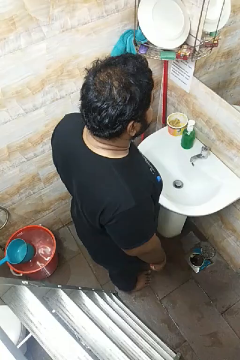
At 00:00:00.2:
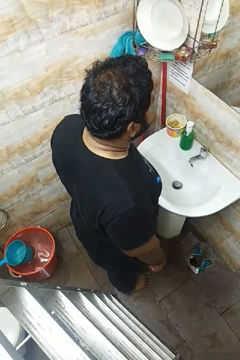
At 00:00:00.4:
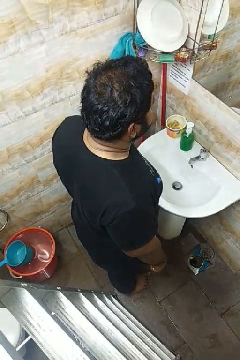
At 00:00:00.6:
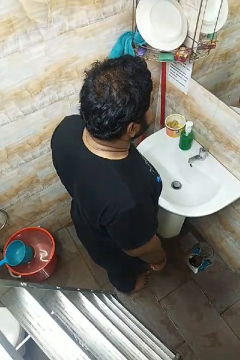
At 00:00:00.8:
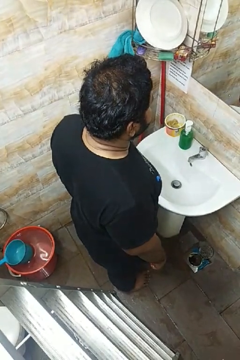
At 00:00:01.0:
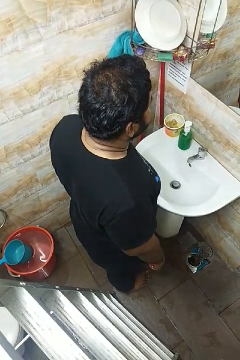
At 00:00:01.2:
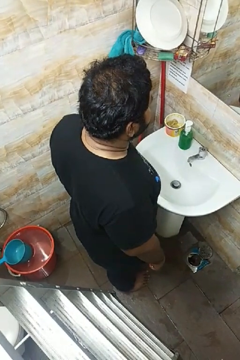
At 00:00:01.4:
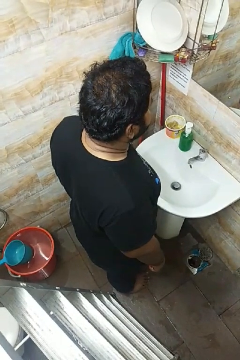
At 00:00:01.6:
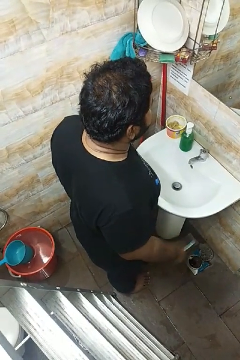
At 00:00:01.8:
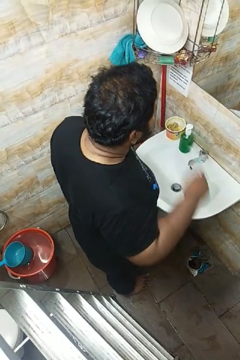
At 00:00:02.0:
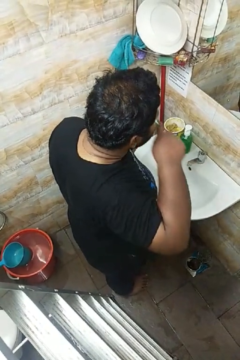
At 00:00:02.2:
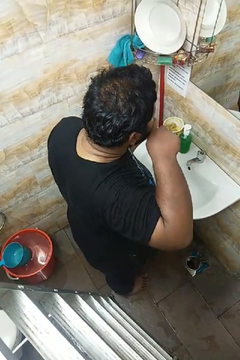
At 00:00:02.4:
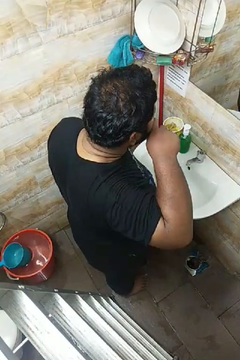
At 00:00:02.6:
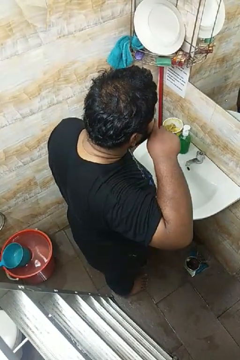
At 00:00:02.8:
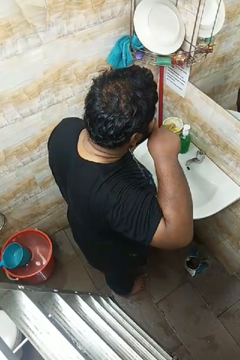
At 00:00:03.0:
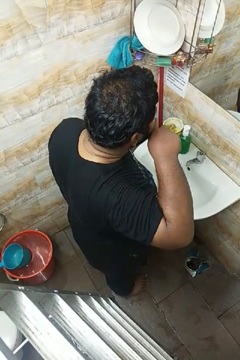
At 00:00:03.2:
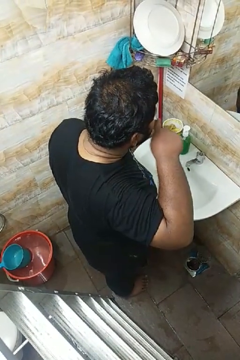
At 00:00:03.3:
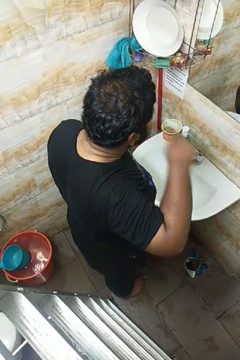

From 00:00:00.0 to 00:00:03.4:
person brushes teeth

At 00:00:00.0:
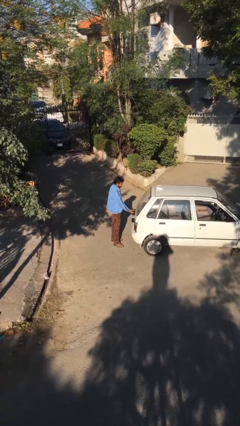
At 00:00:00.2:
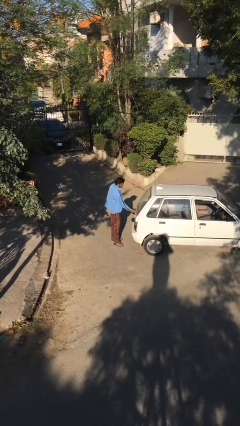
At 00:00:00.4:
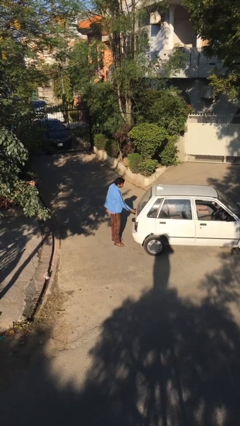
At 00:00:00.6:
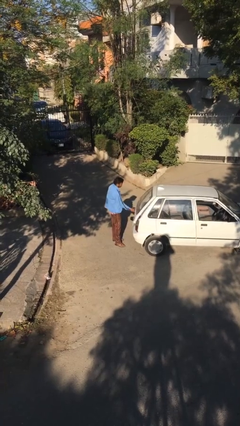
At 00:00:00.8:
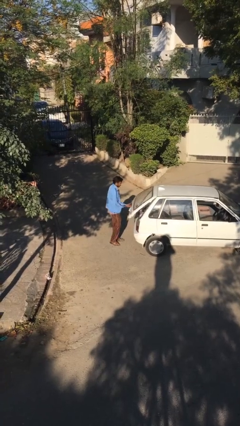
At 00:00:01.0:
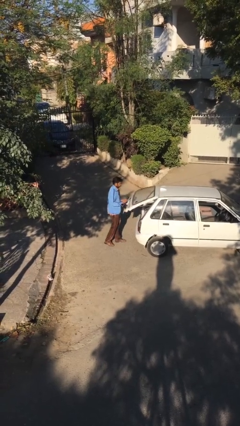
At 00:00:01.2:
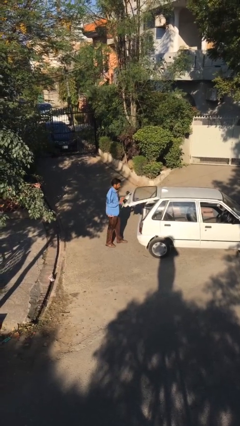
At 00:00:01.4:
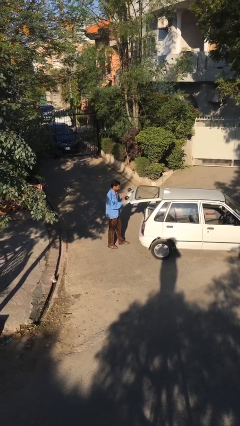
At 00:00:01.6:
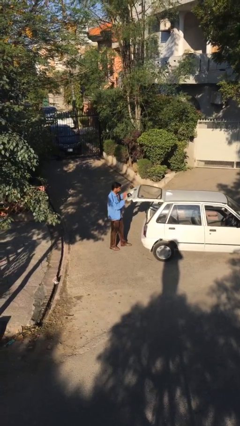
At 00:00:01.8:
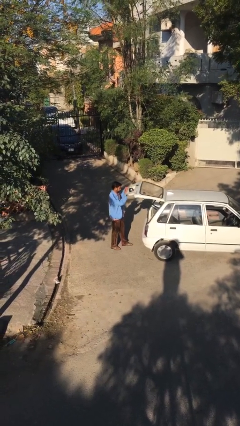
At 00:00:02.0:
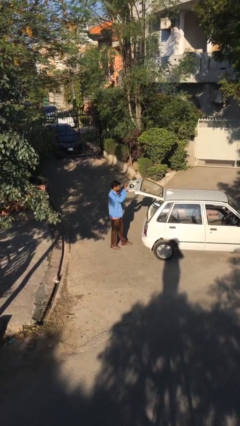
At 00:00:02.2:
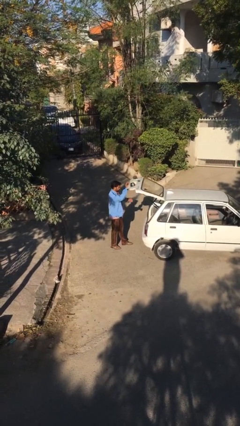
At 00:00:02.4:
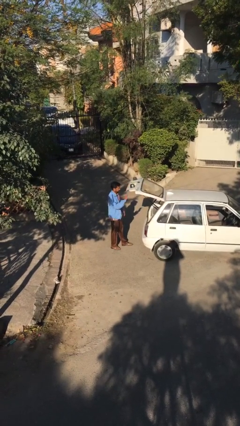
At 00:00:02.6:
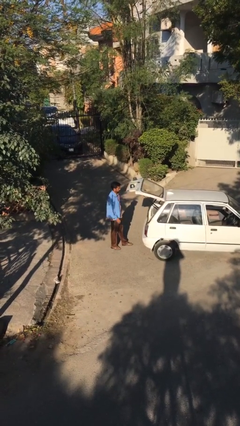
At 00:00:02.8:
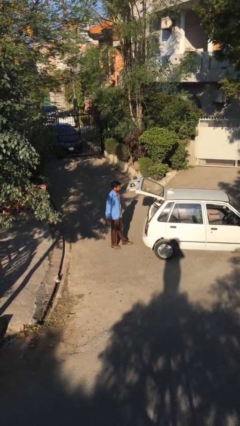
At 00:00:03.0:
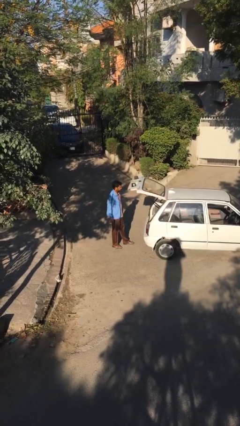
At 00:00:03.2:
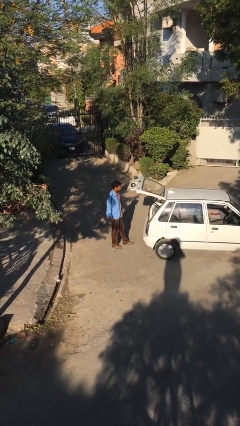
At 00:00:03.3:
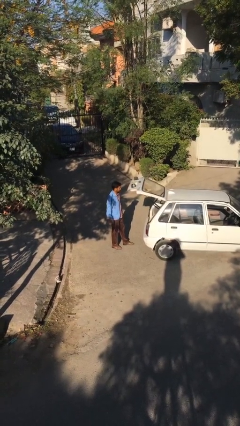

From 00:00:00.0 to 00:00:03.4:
person opens car trunk

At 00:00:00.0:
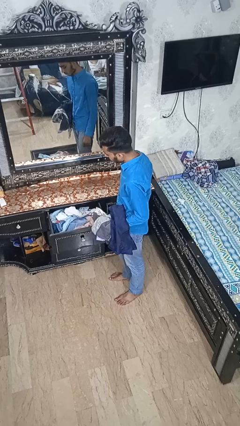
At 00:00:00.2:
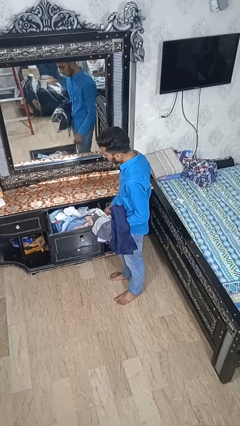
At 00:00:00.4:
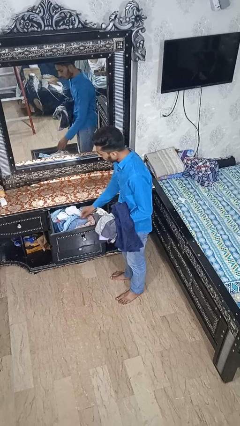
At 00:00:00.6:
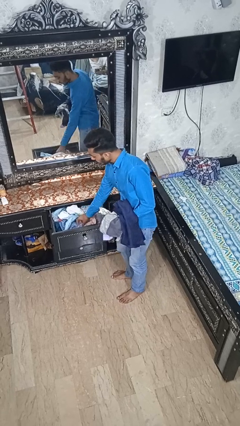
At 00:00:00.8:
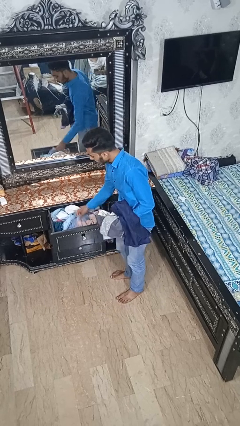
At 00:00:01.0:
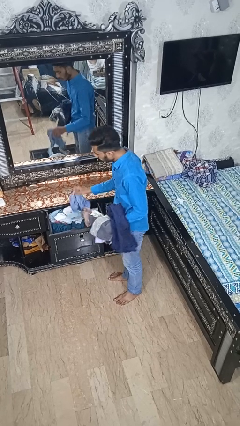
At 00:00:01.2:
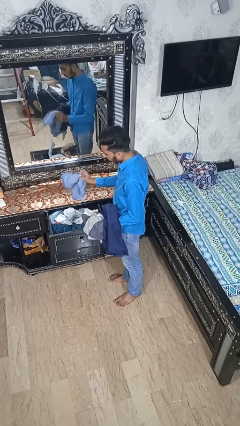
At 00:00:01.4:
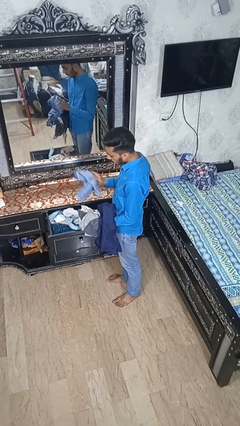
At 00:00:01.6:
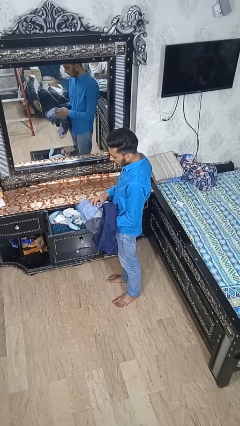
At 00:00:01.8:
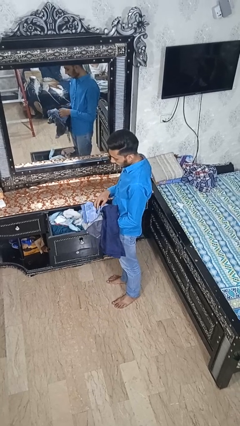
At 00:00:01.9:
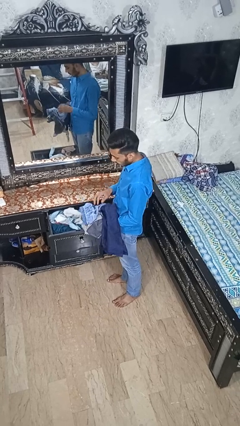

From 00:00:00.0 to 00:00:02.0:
person takes clothes from dresser

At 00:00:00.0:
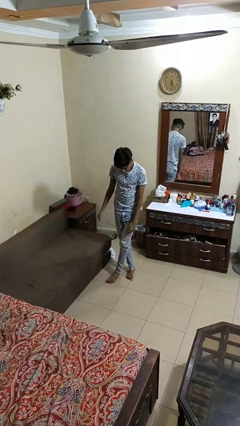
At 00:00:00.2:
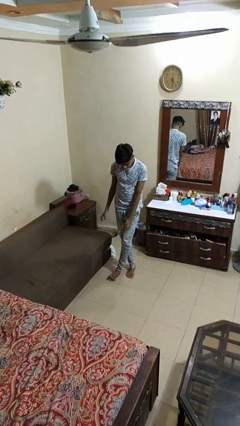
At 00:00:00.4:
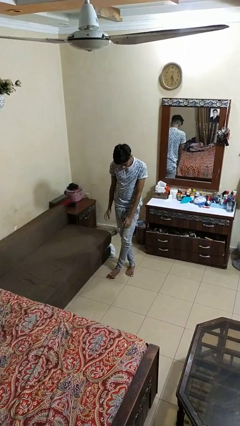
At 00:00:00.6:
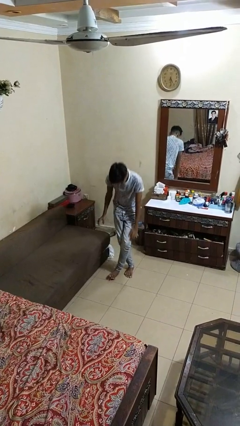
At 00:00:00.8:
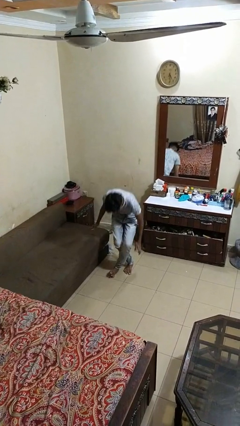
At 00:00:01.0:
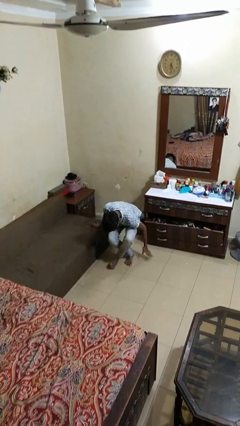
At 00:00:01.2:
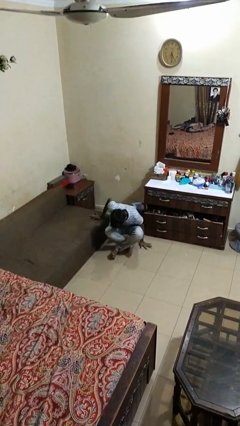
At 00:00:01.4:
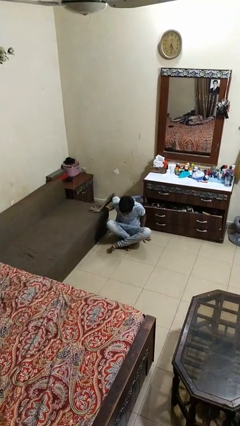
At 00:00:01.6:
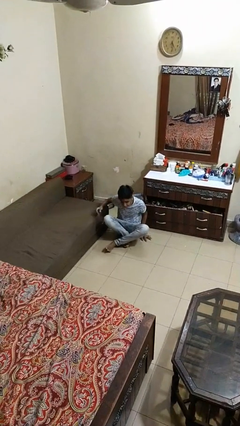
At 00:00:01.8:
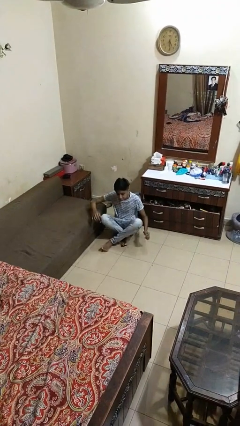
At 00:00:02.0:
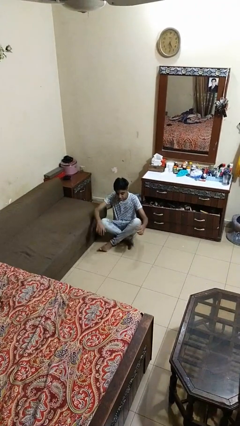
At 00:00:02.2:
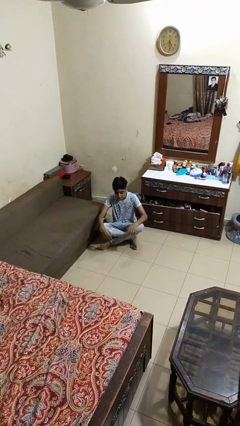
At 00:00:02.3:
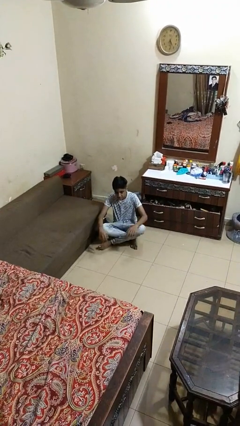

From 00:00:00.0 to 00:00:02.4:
person sits crisscross

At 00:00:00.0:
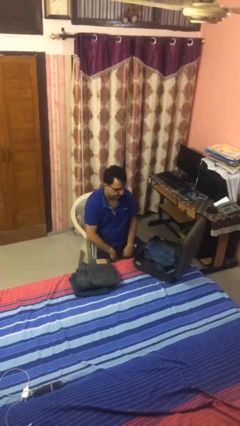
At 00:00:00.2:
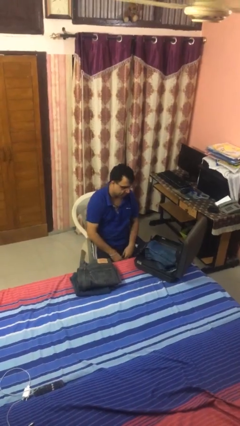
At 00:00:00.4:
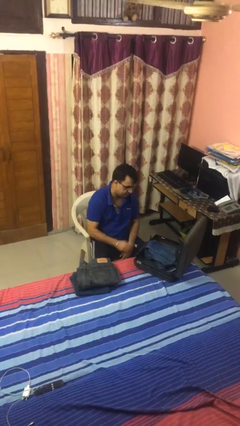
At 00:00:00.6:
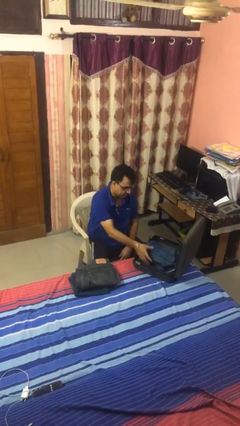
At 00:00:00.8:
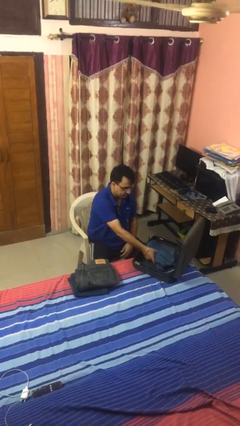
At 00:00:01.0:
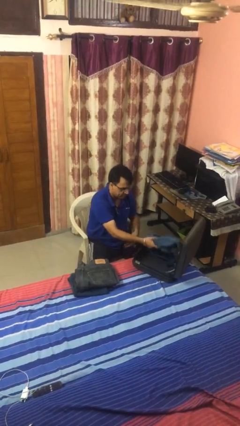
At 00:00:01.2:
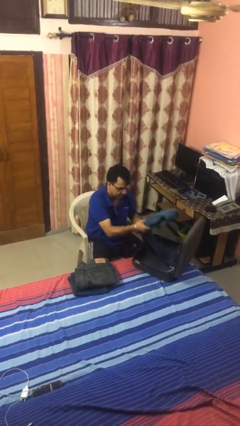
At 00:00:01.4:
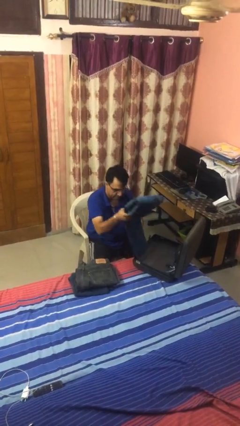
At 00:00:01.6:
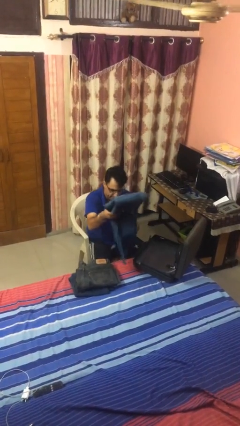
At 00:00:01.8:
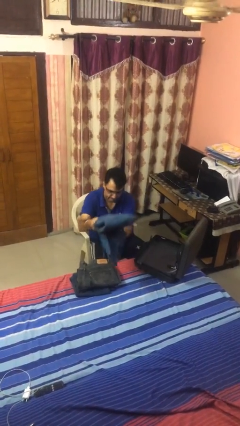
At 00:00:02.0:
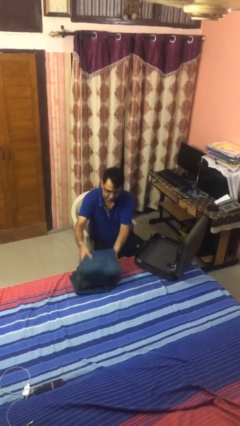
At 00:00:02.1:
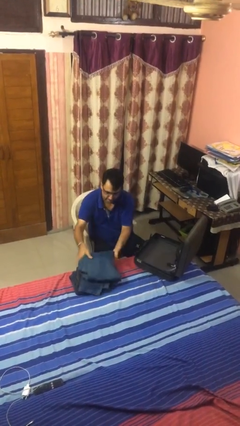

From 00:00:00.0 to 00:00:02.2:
person unloads clothes from suitcase

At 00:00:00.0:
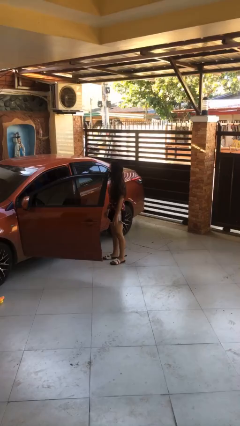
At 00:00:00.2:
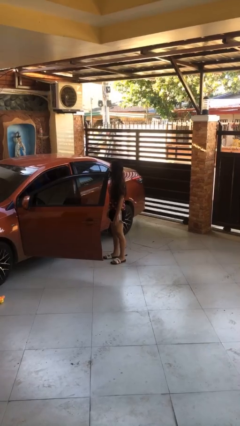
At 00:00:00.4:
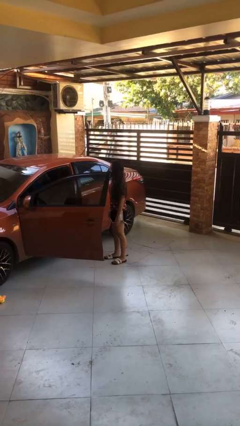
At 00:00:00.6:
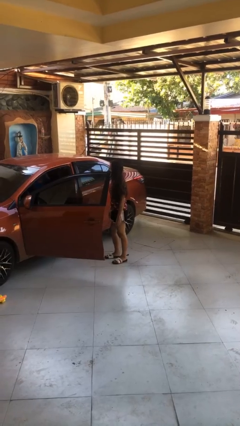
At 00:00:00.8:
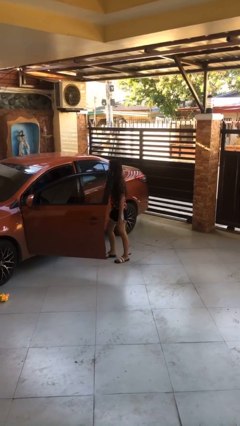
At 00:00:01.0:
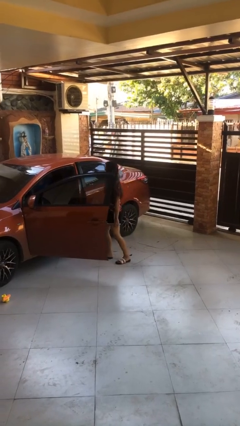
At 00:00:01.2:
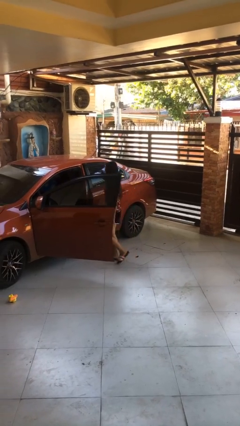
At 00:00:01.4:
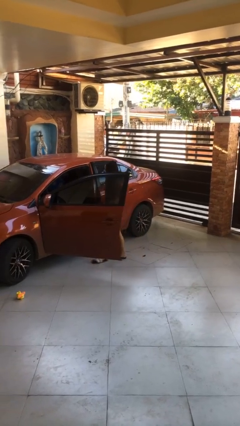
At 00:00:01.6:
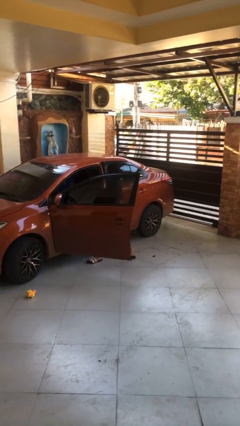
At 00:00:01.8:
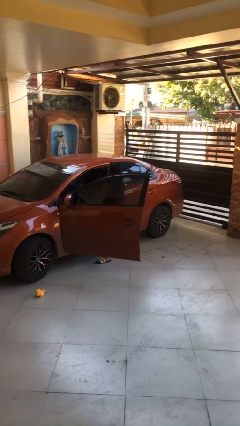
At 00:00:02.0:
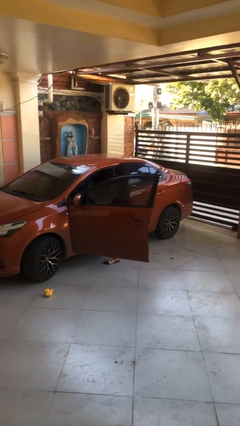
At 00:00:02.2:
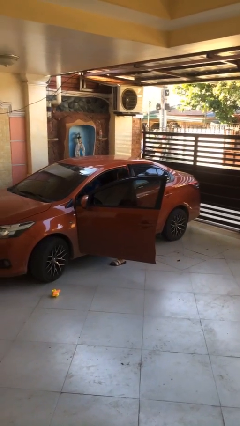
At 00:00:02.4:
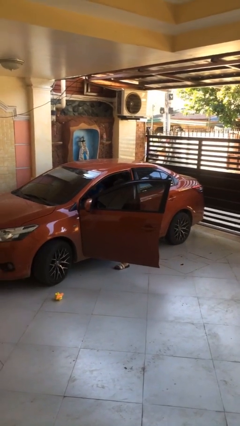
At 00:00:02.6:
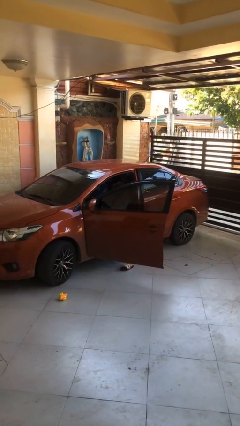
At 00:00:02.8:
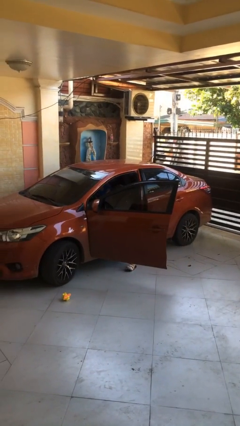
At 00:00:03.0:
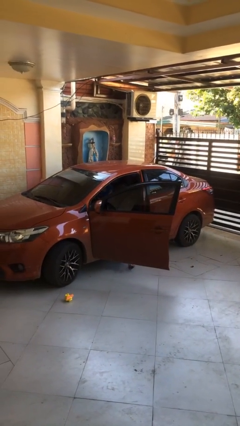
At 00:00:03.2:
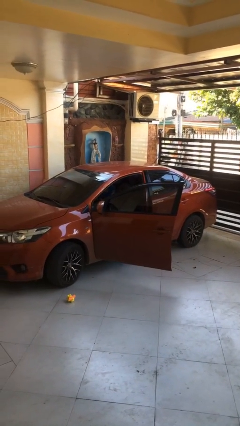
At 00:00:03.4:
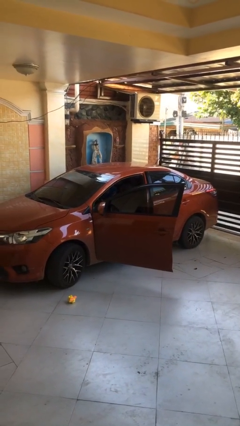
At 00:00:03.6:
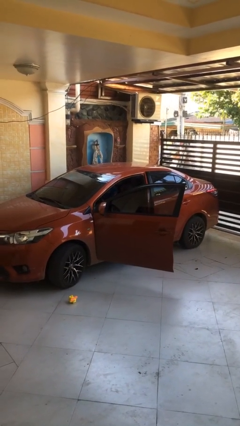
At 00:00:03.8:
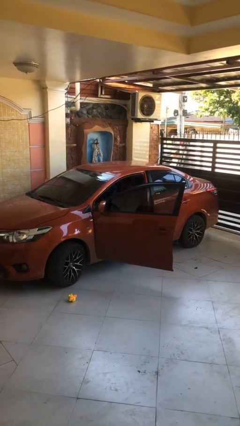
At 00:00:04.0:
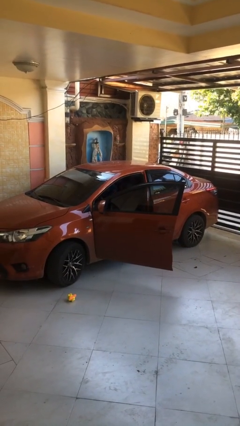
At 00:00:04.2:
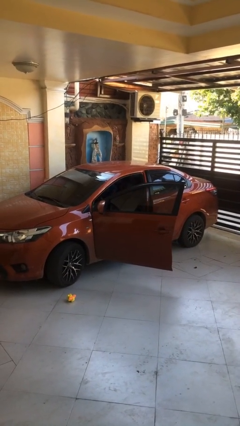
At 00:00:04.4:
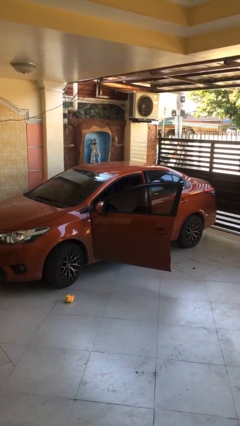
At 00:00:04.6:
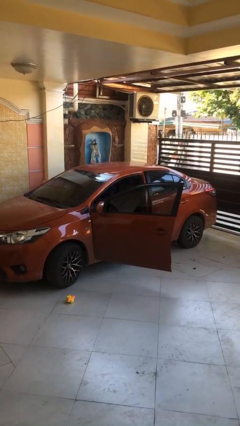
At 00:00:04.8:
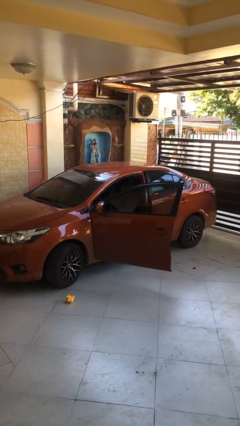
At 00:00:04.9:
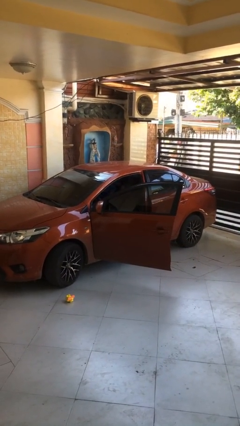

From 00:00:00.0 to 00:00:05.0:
person enters car
